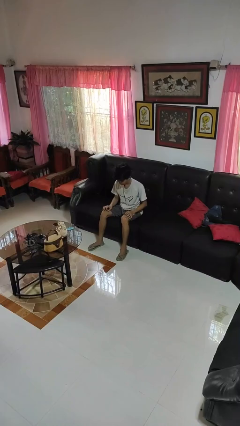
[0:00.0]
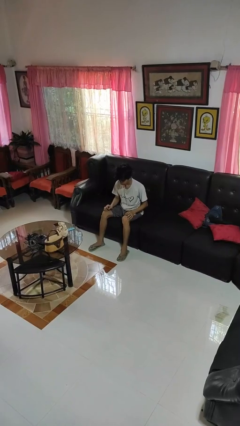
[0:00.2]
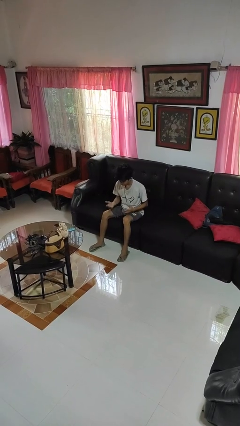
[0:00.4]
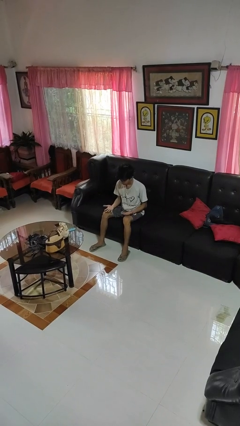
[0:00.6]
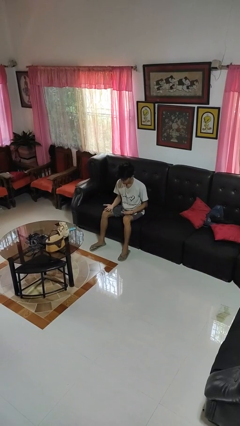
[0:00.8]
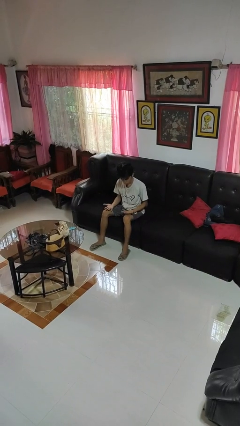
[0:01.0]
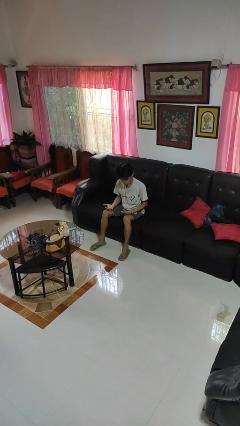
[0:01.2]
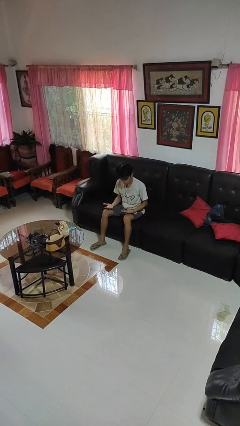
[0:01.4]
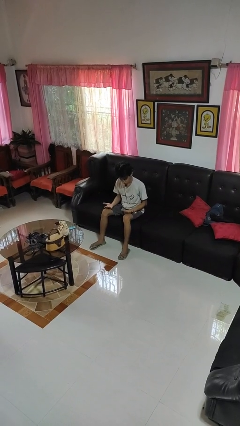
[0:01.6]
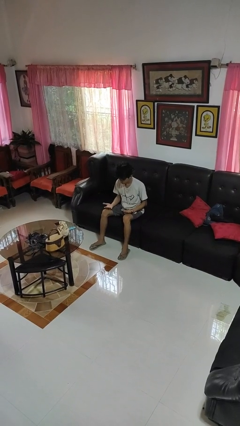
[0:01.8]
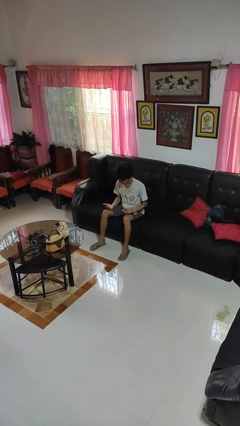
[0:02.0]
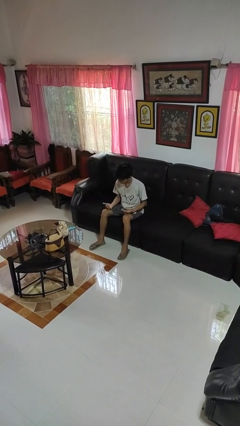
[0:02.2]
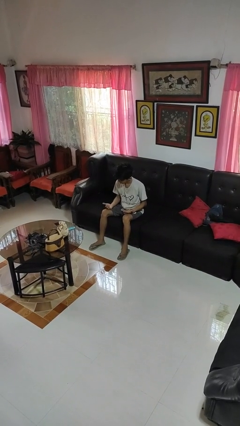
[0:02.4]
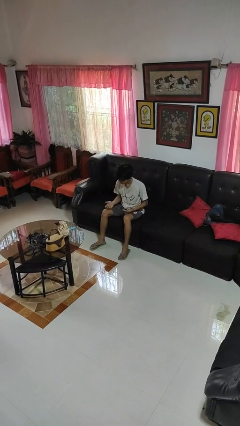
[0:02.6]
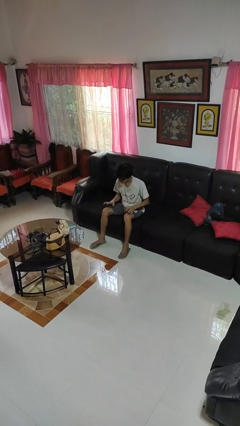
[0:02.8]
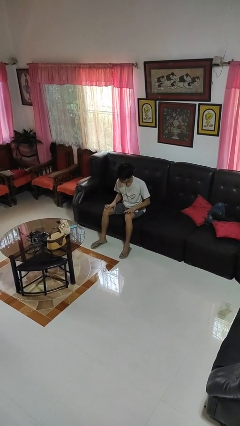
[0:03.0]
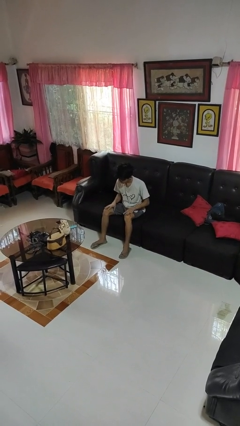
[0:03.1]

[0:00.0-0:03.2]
person looks at hands in lap

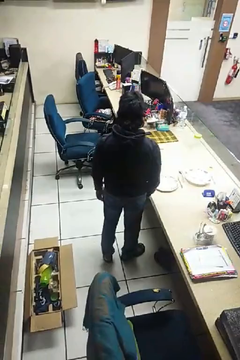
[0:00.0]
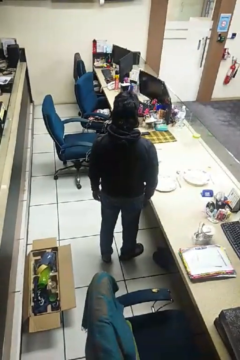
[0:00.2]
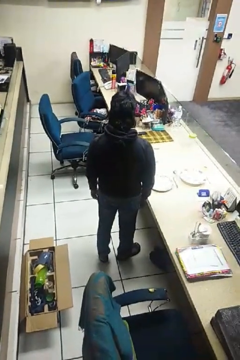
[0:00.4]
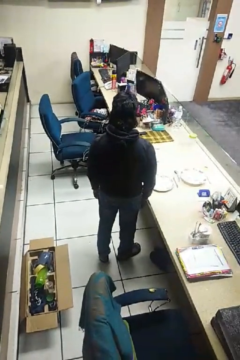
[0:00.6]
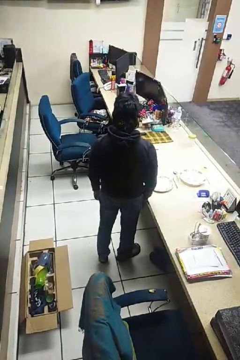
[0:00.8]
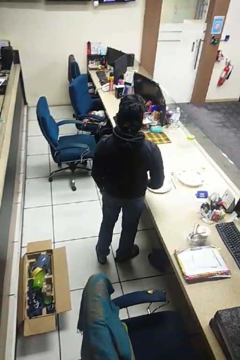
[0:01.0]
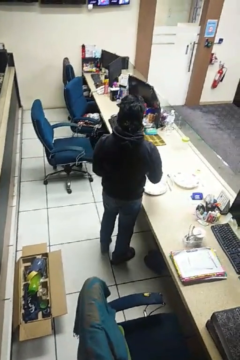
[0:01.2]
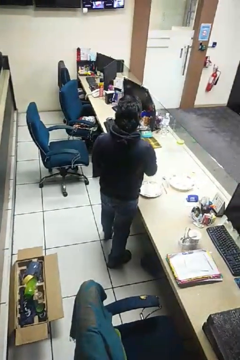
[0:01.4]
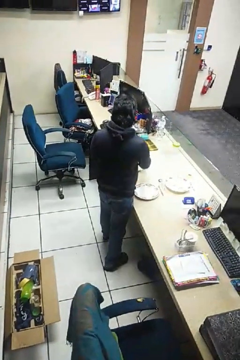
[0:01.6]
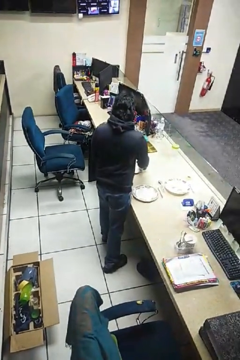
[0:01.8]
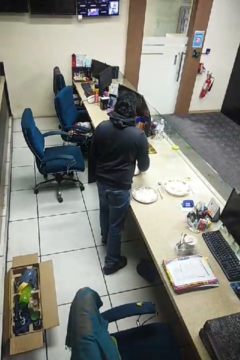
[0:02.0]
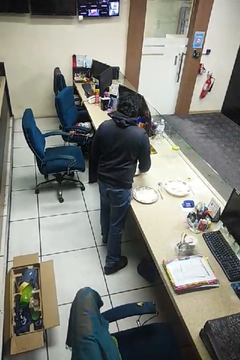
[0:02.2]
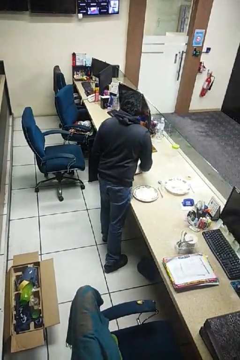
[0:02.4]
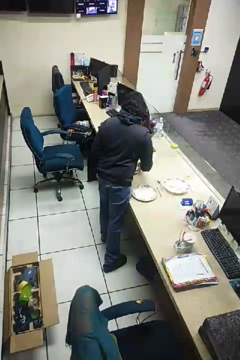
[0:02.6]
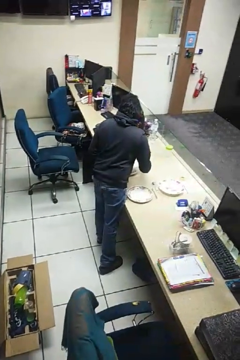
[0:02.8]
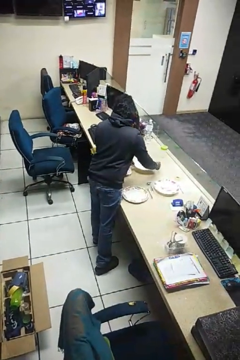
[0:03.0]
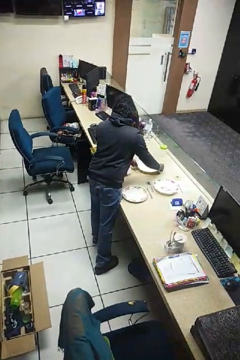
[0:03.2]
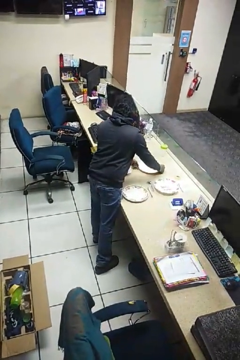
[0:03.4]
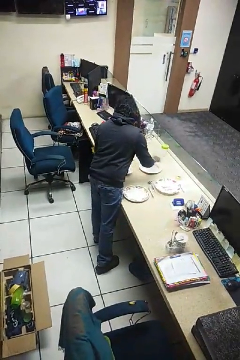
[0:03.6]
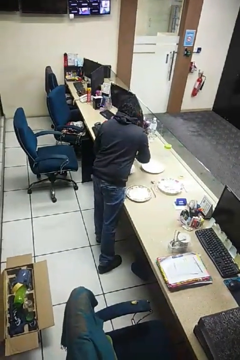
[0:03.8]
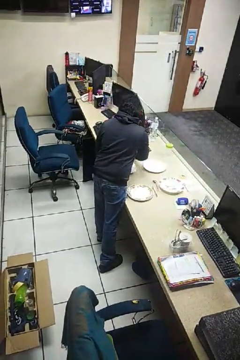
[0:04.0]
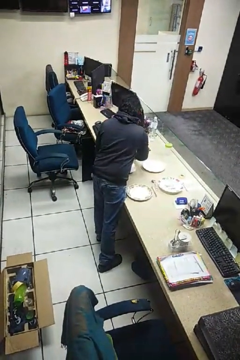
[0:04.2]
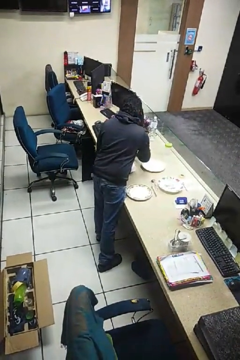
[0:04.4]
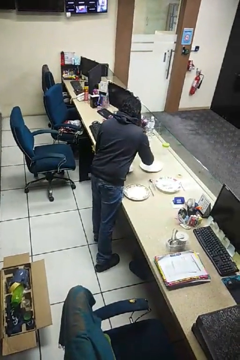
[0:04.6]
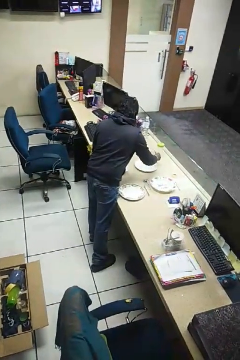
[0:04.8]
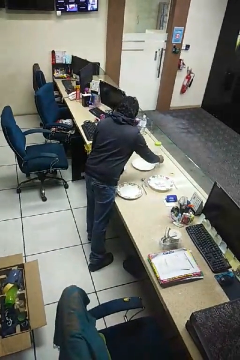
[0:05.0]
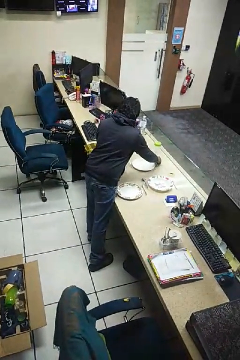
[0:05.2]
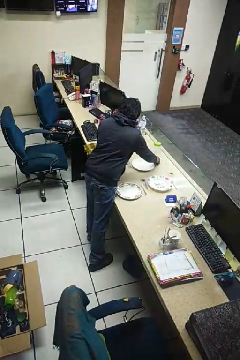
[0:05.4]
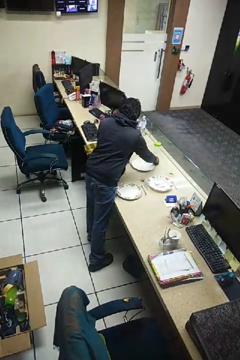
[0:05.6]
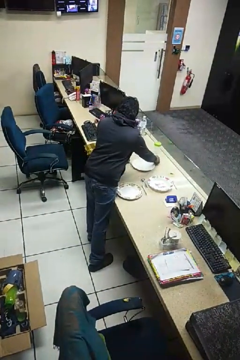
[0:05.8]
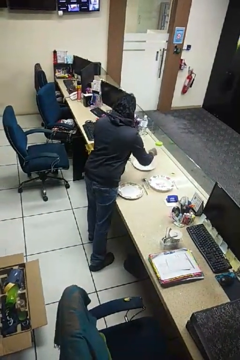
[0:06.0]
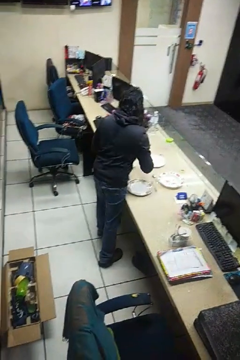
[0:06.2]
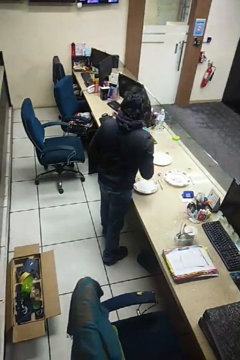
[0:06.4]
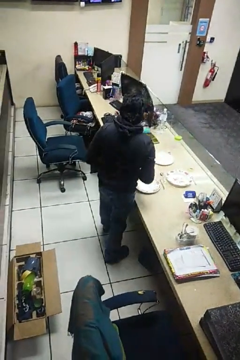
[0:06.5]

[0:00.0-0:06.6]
person sets table

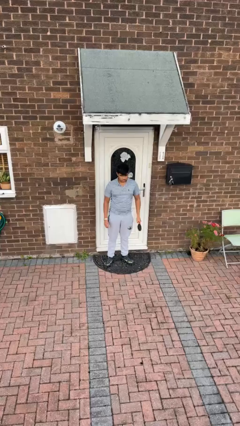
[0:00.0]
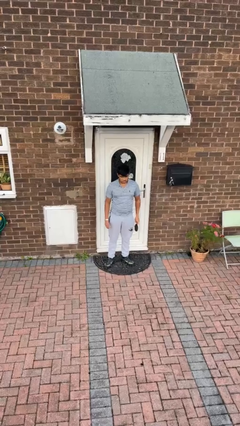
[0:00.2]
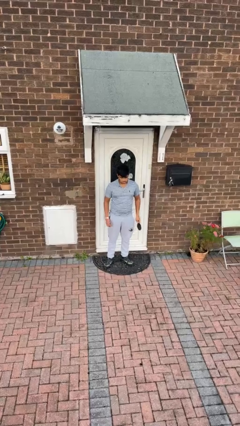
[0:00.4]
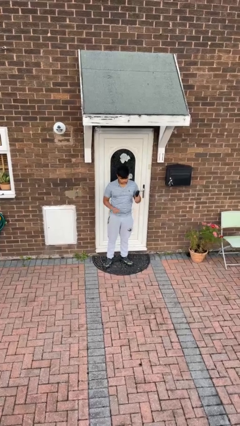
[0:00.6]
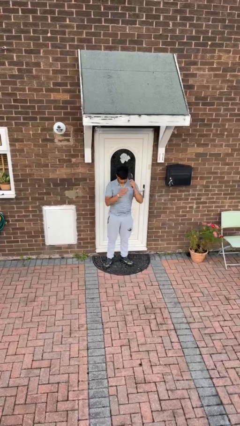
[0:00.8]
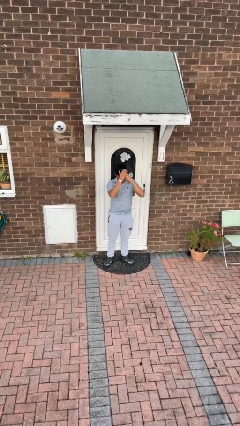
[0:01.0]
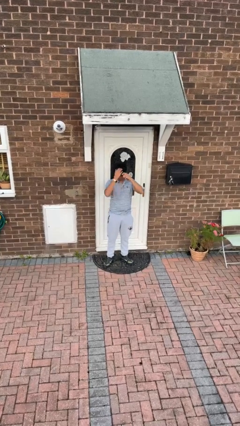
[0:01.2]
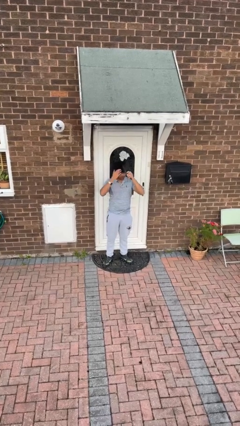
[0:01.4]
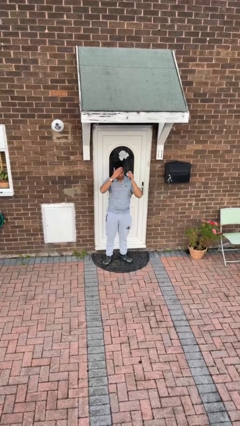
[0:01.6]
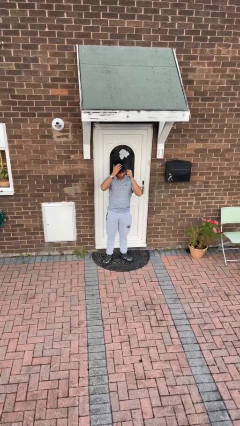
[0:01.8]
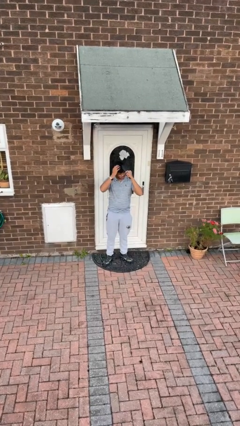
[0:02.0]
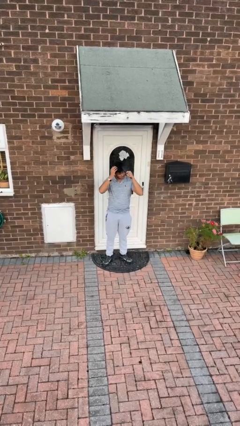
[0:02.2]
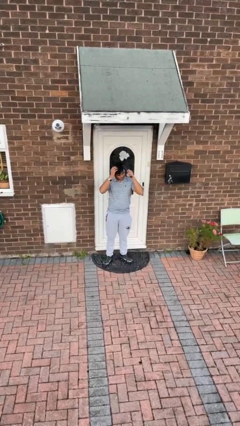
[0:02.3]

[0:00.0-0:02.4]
person brushes hair

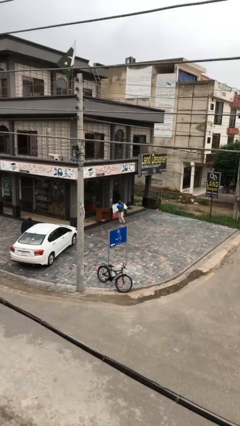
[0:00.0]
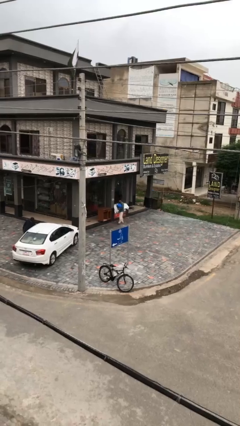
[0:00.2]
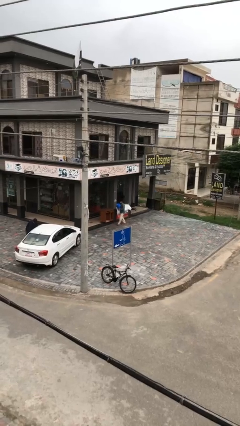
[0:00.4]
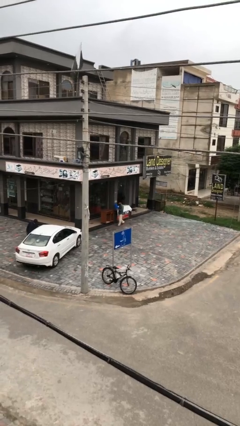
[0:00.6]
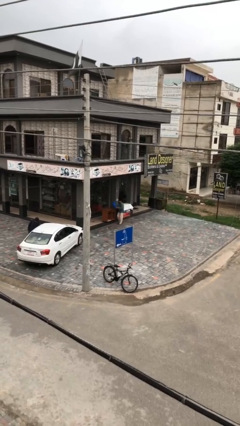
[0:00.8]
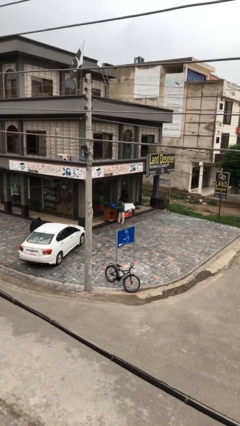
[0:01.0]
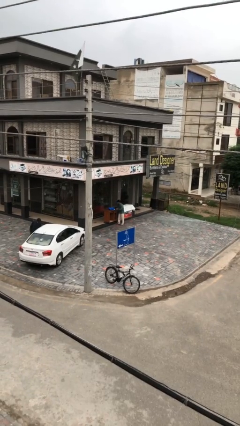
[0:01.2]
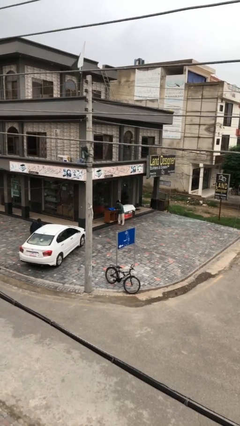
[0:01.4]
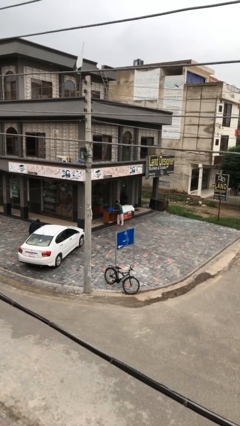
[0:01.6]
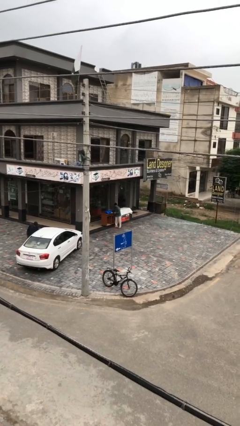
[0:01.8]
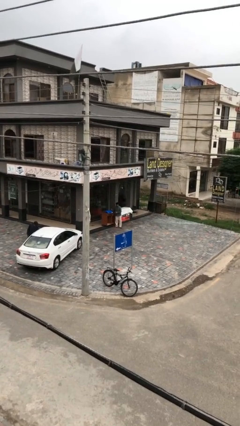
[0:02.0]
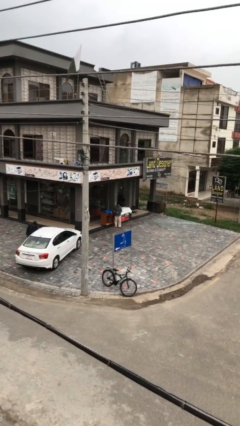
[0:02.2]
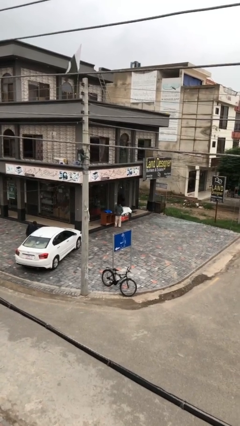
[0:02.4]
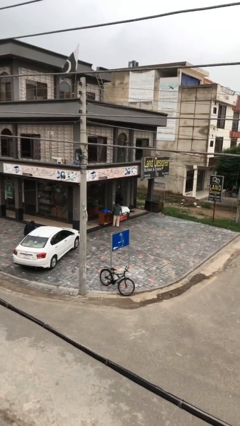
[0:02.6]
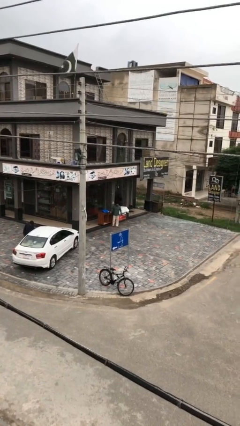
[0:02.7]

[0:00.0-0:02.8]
person puts down object on table

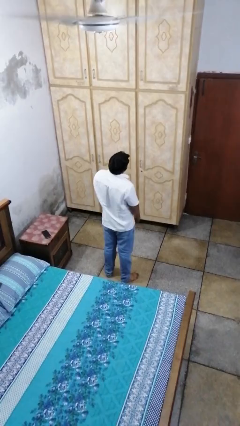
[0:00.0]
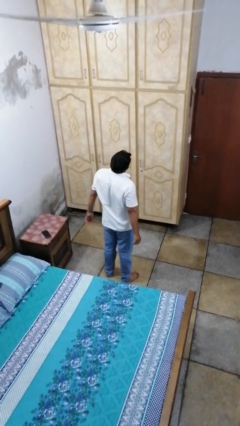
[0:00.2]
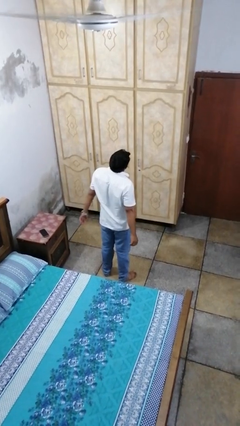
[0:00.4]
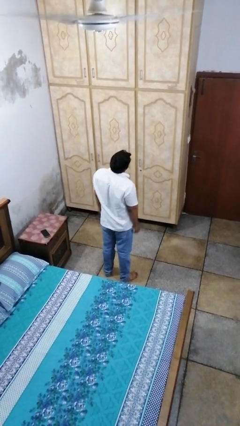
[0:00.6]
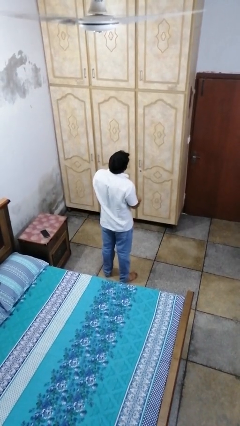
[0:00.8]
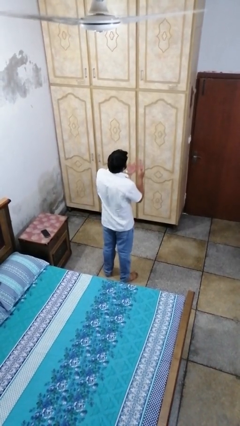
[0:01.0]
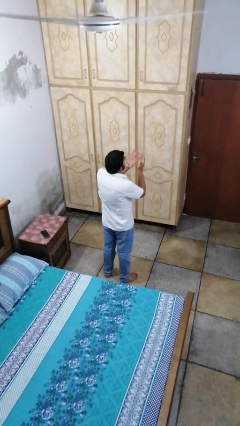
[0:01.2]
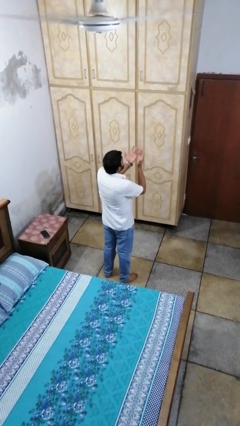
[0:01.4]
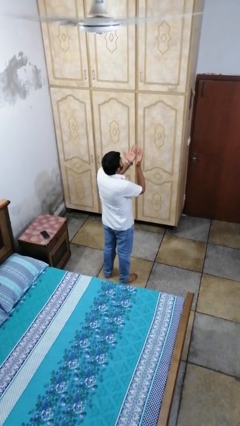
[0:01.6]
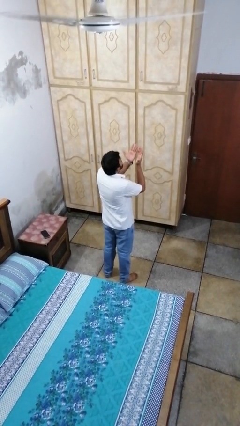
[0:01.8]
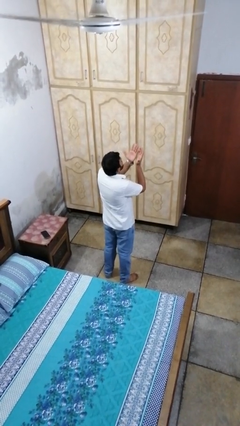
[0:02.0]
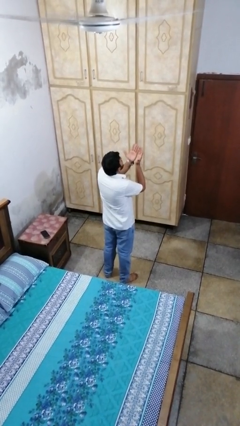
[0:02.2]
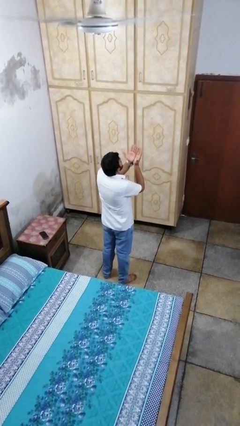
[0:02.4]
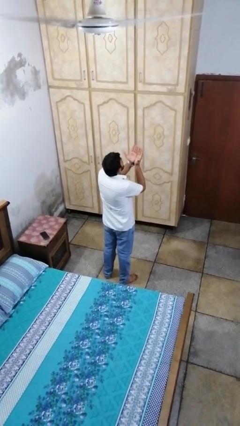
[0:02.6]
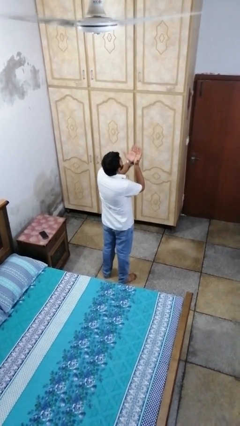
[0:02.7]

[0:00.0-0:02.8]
person prays

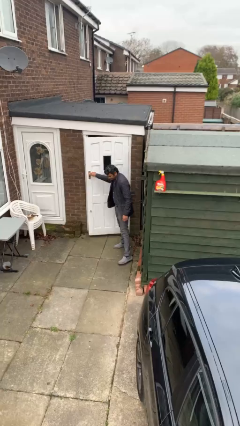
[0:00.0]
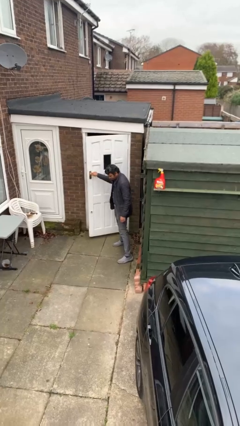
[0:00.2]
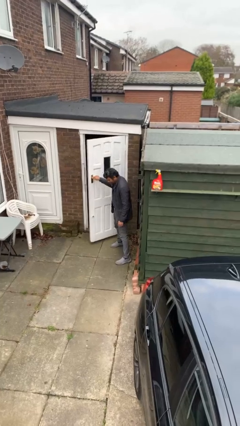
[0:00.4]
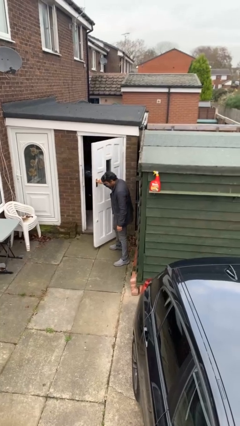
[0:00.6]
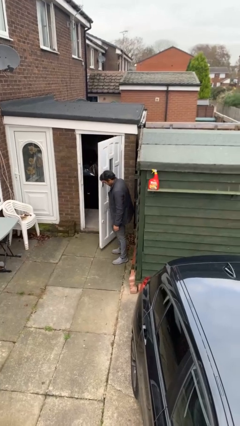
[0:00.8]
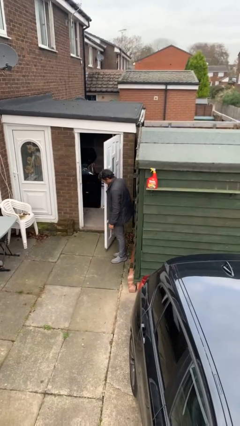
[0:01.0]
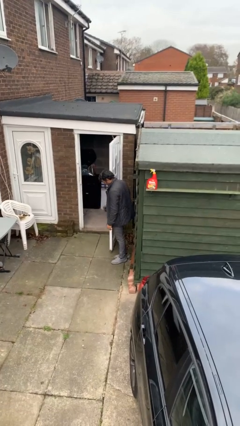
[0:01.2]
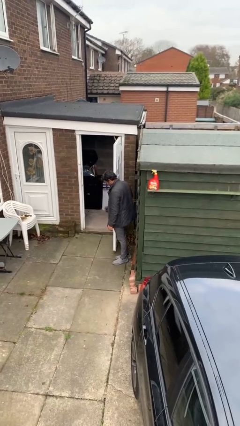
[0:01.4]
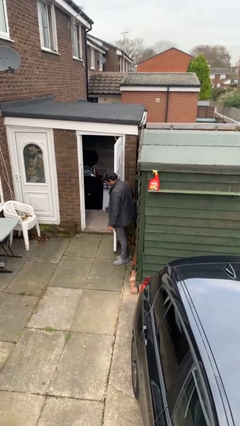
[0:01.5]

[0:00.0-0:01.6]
person opens facility door
